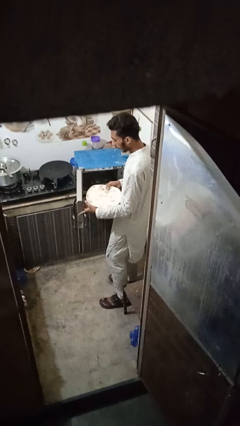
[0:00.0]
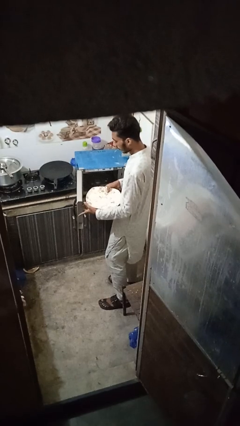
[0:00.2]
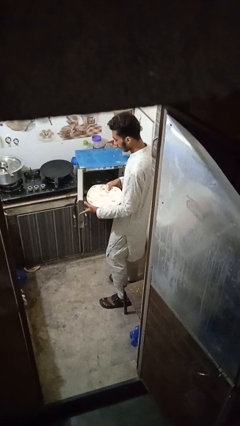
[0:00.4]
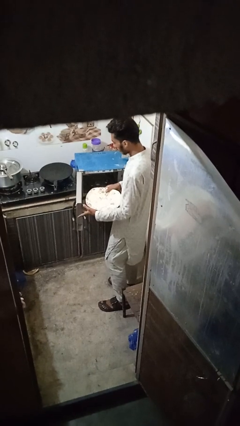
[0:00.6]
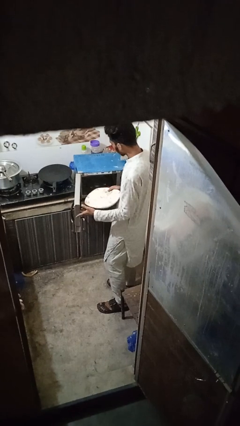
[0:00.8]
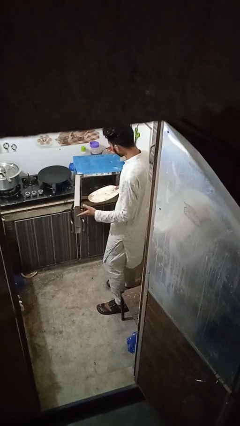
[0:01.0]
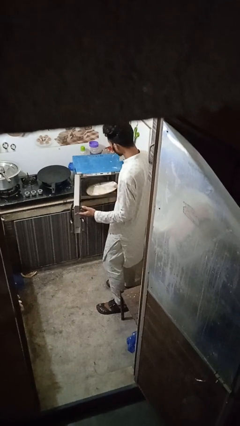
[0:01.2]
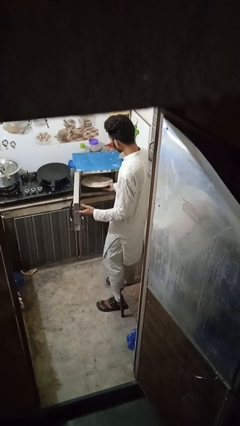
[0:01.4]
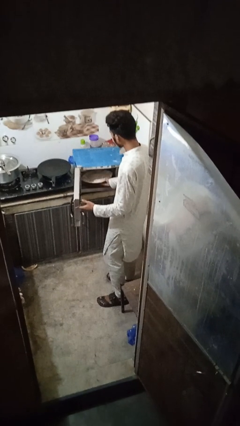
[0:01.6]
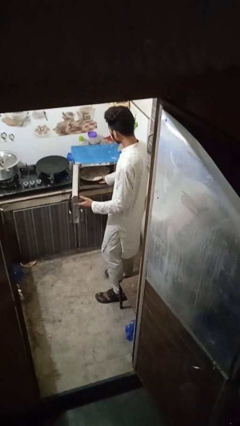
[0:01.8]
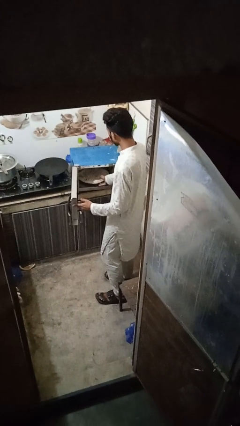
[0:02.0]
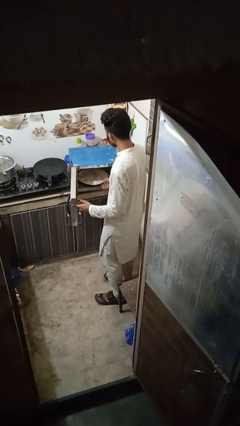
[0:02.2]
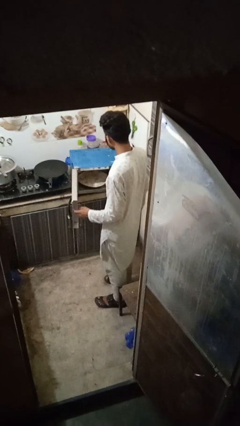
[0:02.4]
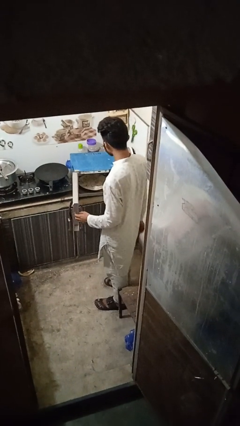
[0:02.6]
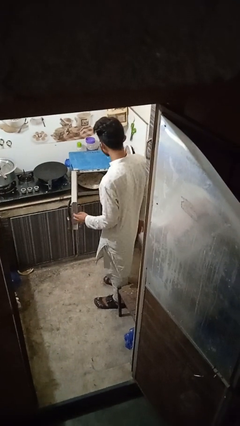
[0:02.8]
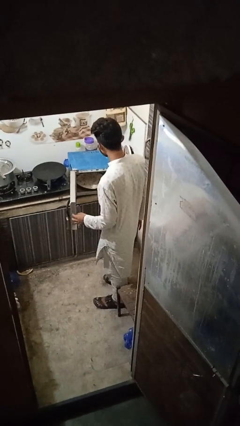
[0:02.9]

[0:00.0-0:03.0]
person puts object into oven

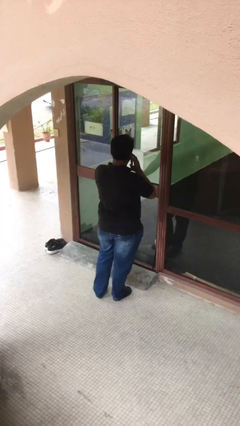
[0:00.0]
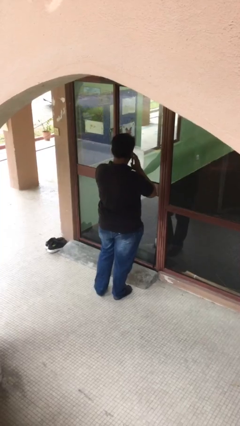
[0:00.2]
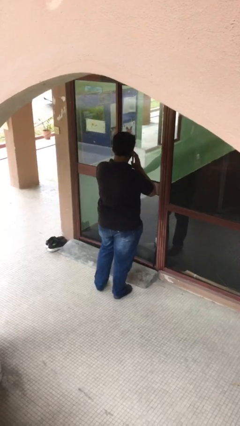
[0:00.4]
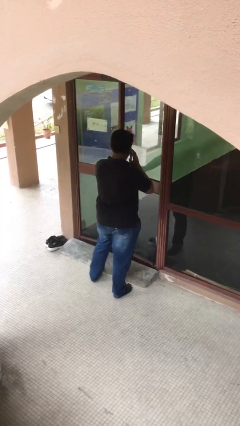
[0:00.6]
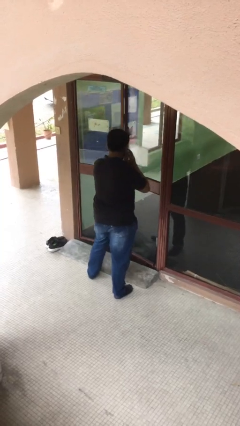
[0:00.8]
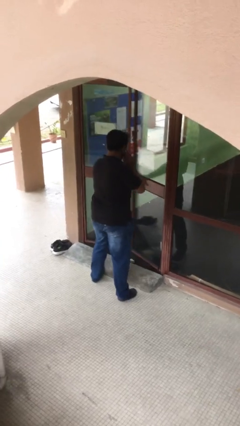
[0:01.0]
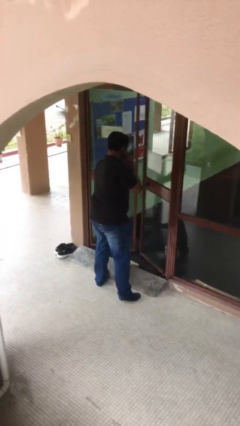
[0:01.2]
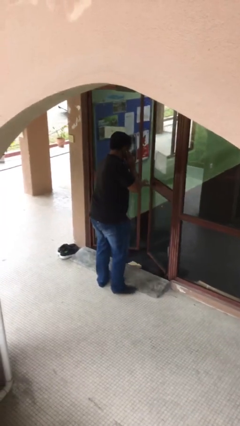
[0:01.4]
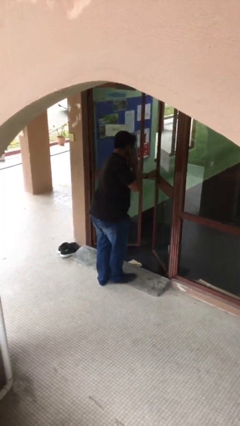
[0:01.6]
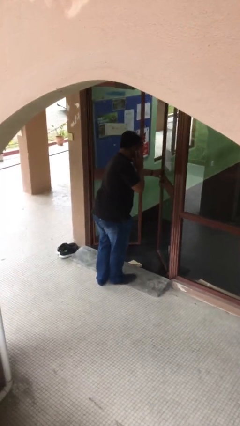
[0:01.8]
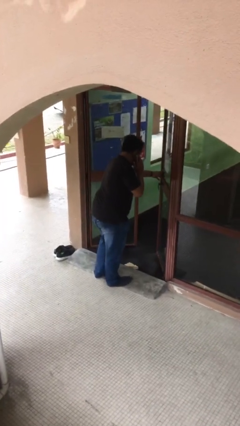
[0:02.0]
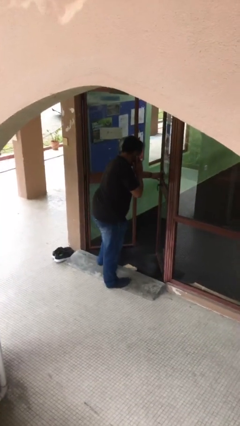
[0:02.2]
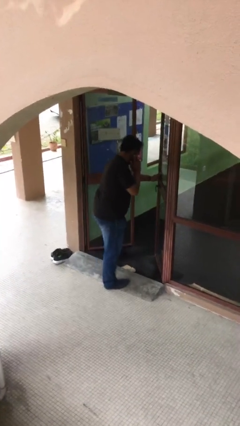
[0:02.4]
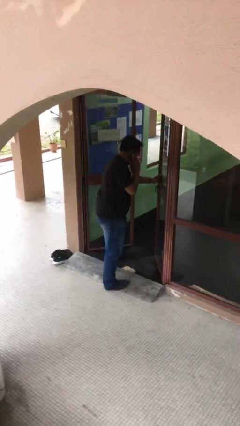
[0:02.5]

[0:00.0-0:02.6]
person opens facility door

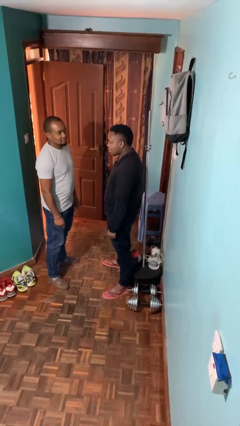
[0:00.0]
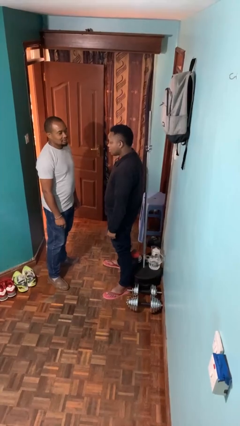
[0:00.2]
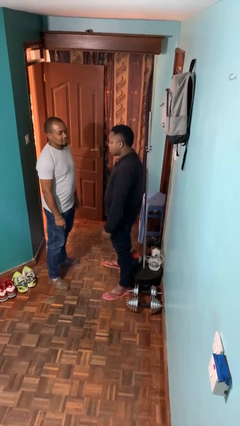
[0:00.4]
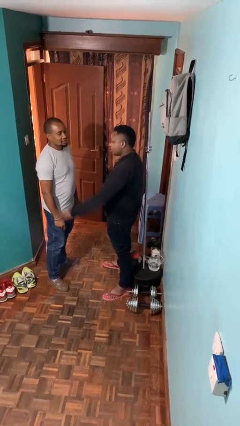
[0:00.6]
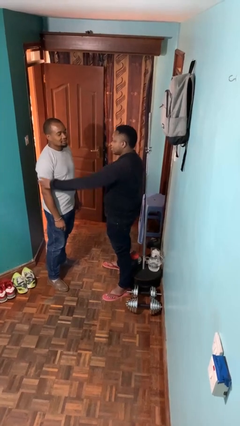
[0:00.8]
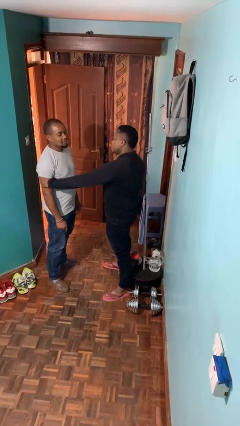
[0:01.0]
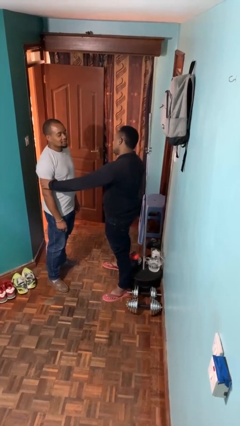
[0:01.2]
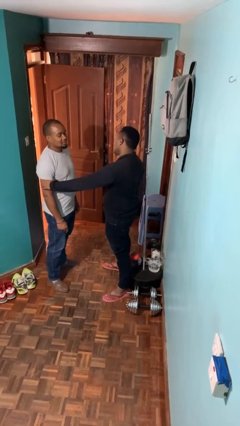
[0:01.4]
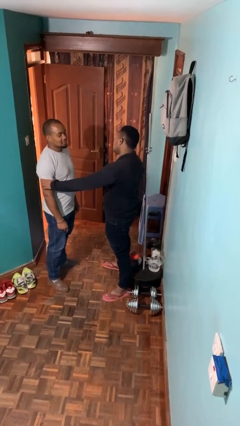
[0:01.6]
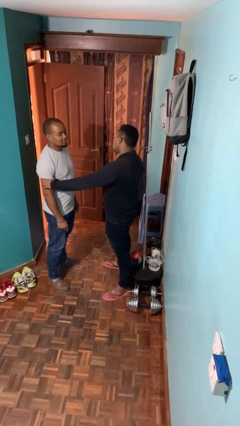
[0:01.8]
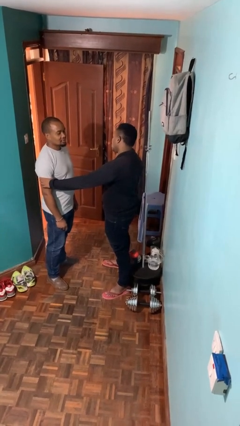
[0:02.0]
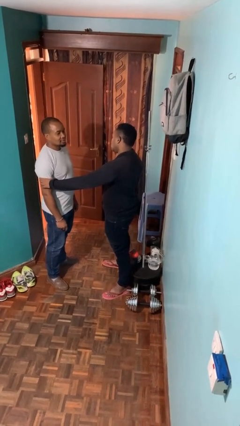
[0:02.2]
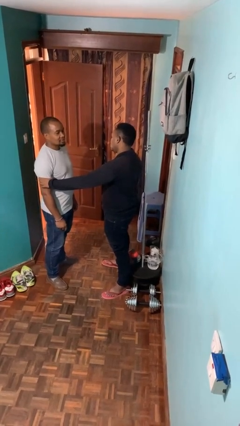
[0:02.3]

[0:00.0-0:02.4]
person grabs person by bicep

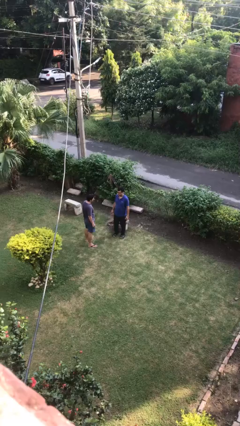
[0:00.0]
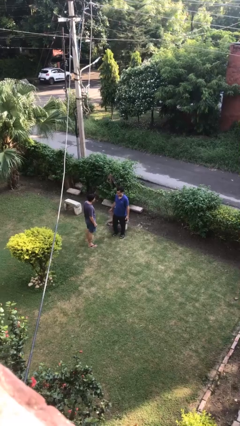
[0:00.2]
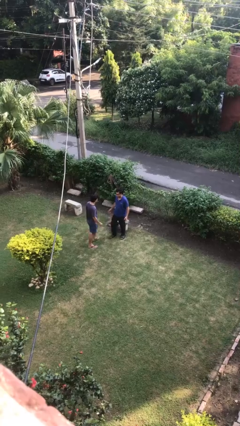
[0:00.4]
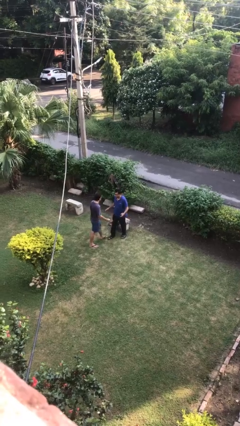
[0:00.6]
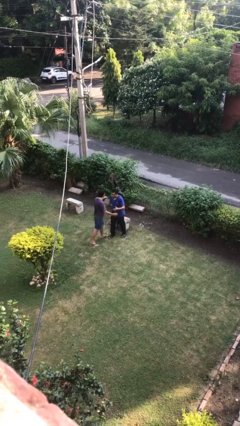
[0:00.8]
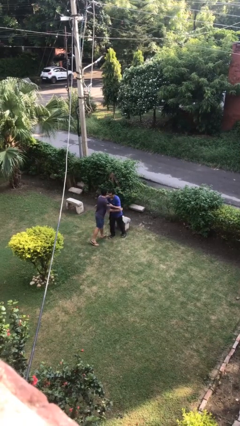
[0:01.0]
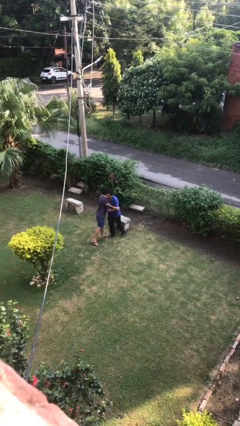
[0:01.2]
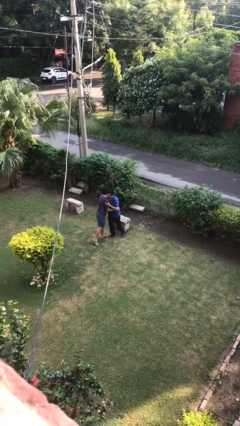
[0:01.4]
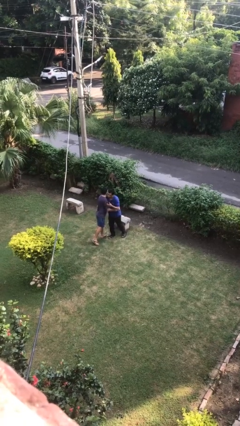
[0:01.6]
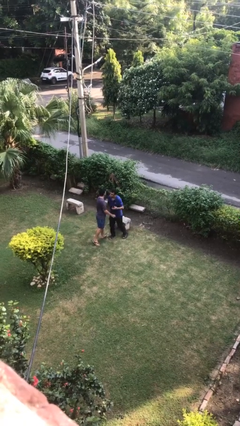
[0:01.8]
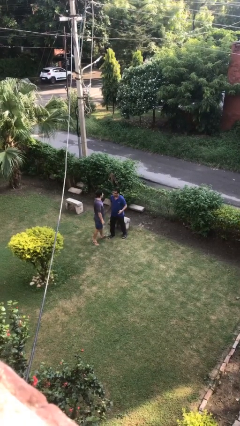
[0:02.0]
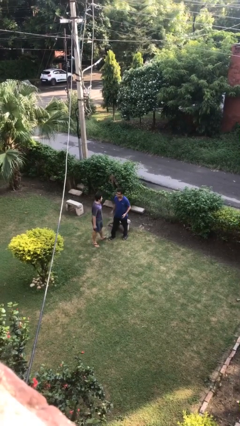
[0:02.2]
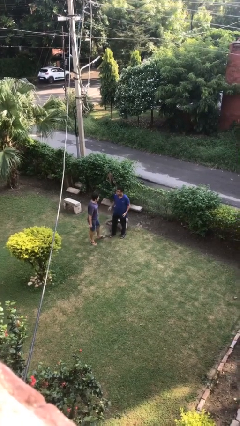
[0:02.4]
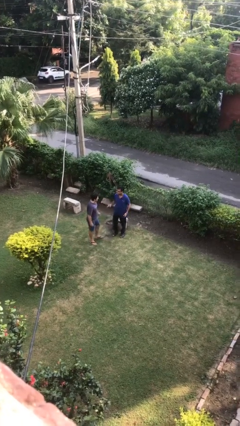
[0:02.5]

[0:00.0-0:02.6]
person embraces person

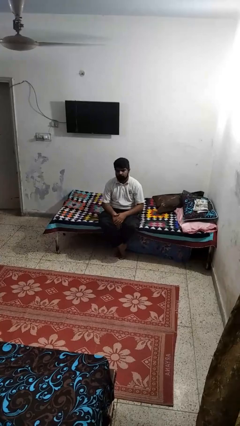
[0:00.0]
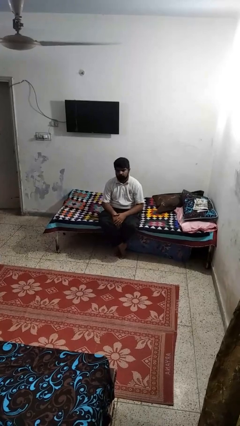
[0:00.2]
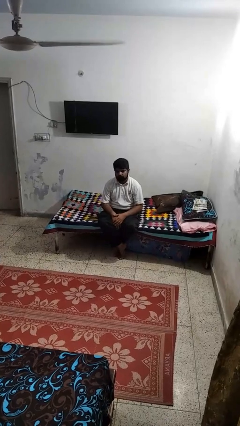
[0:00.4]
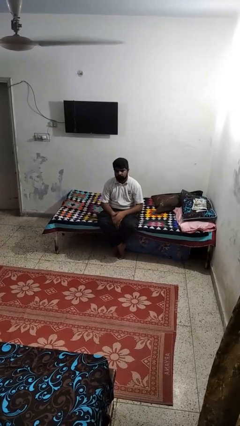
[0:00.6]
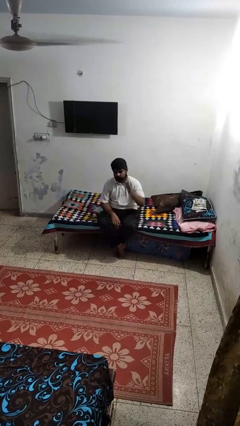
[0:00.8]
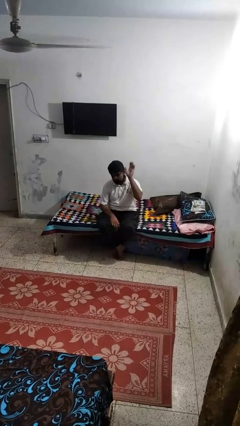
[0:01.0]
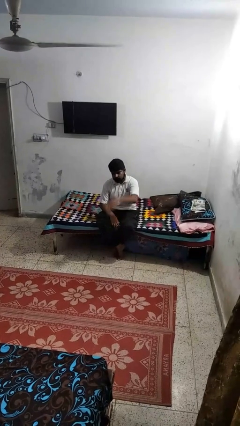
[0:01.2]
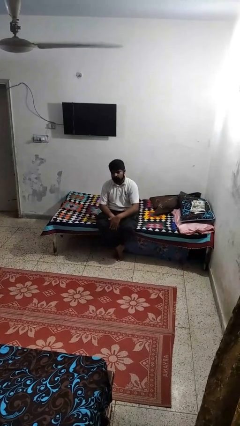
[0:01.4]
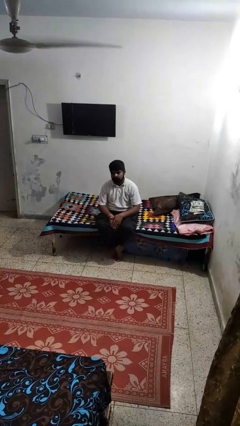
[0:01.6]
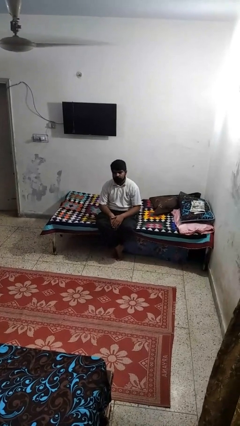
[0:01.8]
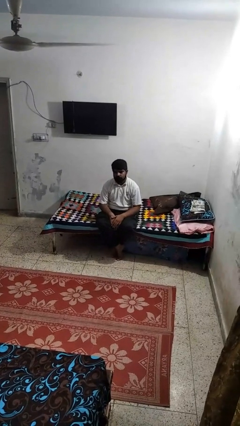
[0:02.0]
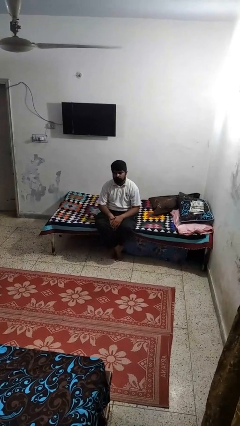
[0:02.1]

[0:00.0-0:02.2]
person gestures swipe down

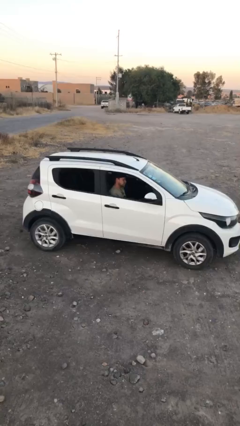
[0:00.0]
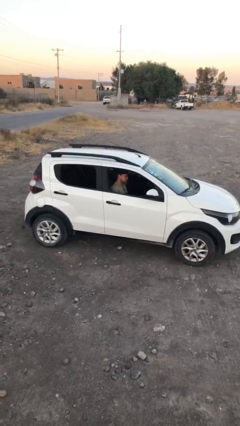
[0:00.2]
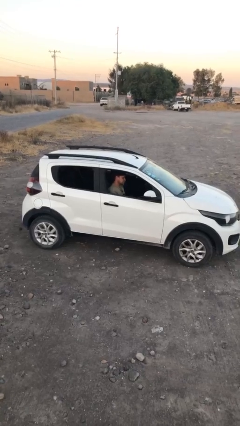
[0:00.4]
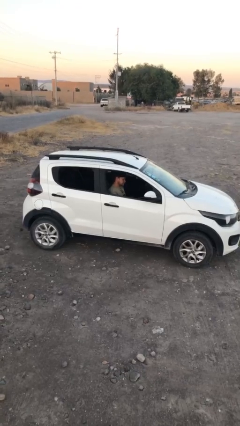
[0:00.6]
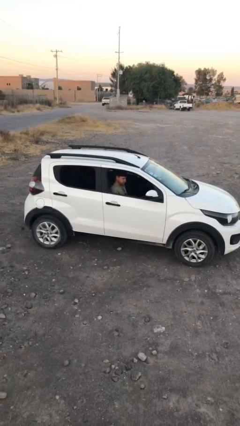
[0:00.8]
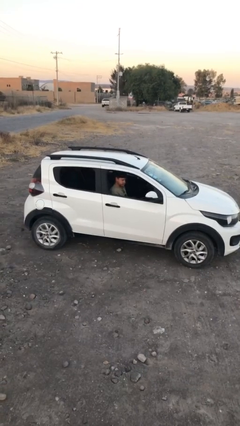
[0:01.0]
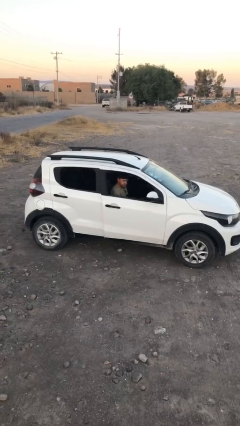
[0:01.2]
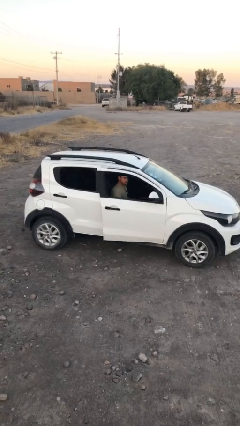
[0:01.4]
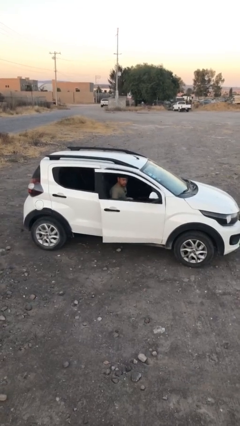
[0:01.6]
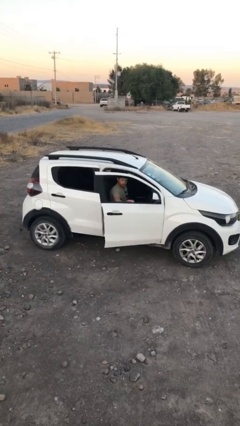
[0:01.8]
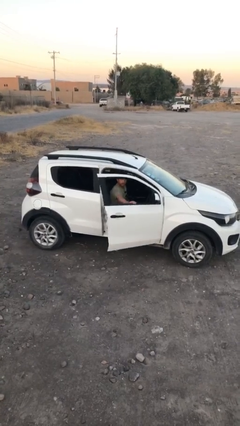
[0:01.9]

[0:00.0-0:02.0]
person opens car door

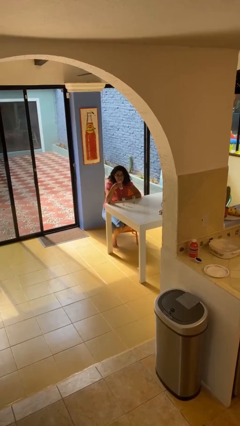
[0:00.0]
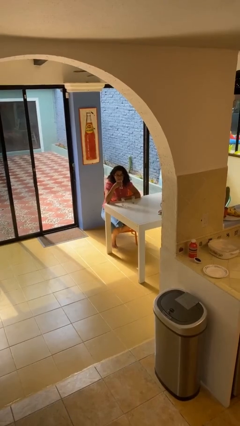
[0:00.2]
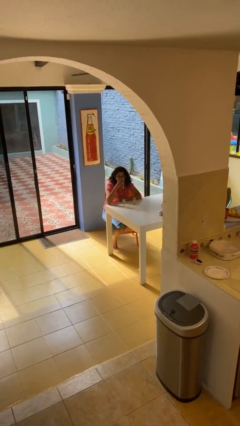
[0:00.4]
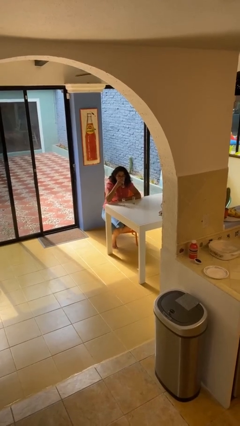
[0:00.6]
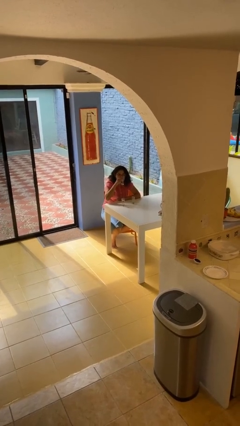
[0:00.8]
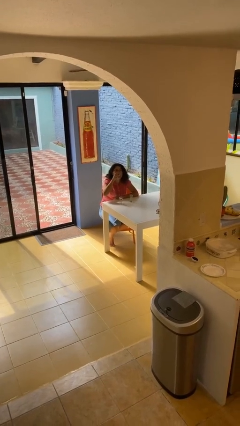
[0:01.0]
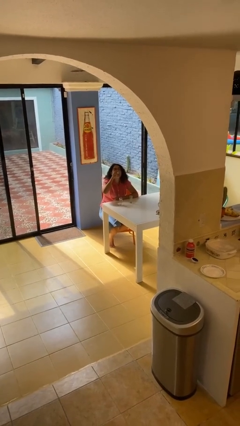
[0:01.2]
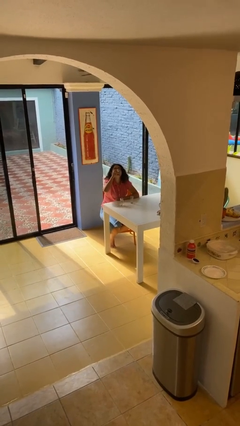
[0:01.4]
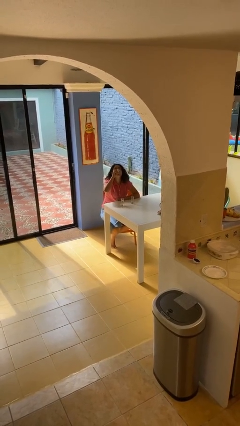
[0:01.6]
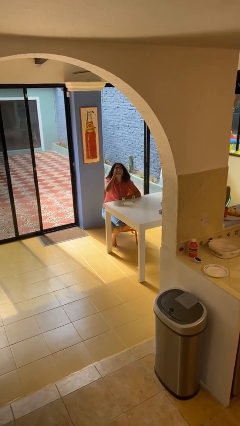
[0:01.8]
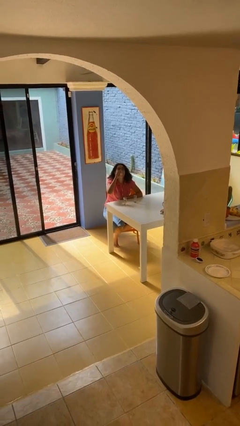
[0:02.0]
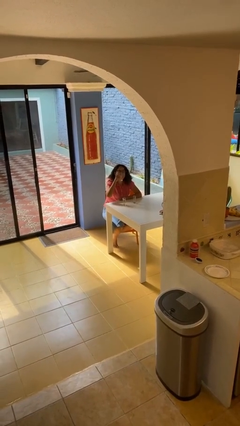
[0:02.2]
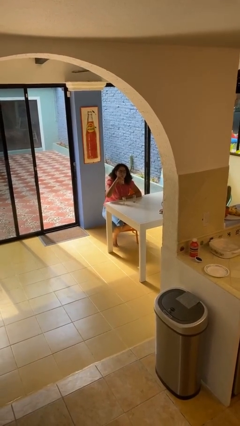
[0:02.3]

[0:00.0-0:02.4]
person drinks from shotglass
